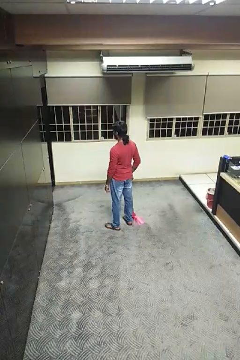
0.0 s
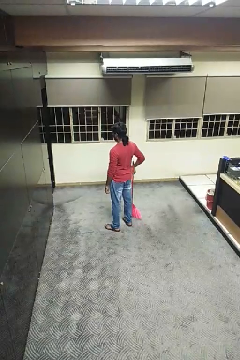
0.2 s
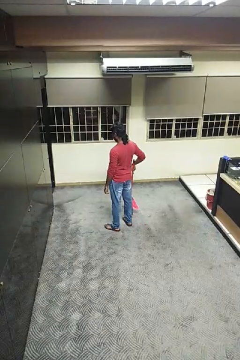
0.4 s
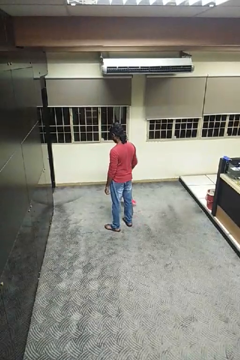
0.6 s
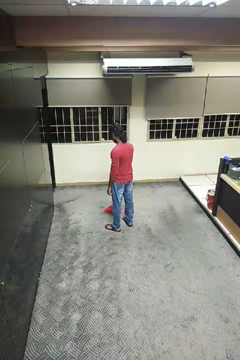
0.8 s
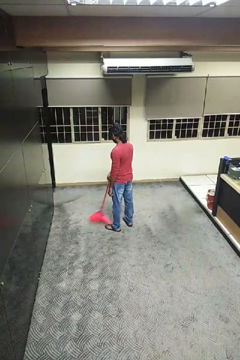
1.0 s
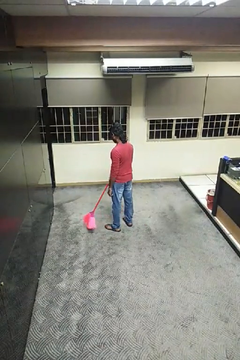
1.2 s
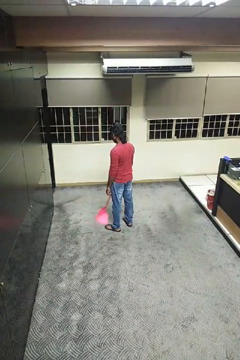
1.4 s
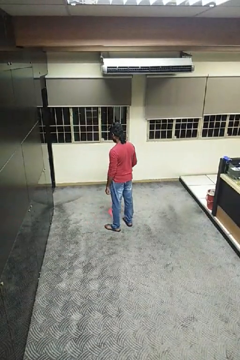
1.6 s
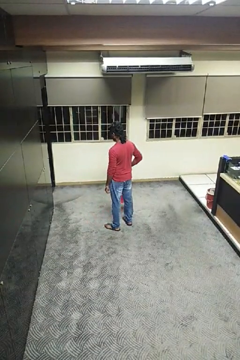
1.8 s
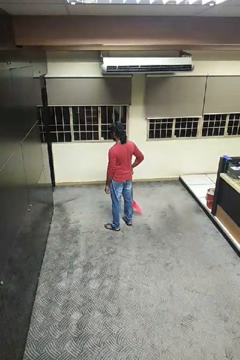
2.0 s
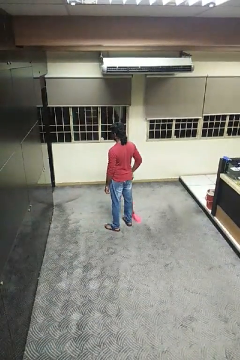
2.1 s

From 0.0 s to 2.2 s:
person sweeps floor

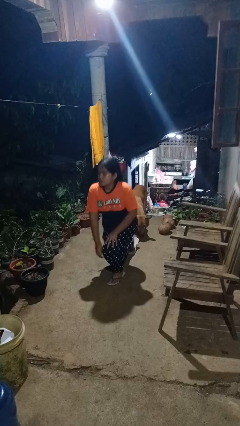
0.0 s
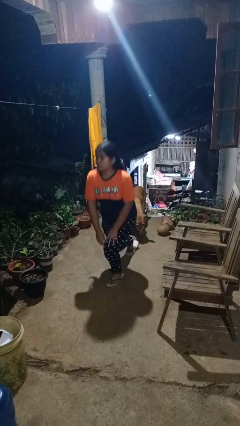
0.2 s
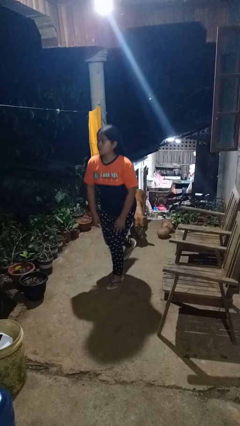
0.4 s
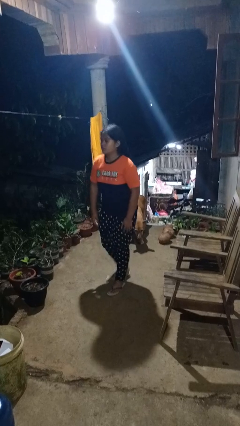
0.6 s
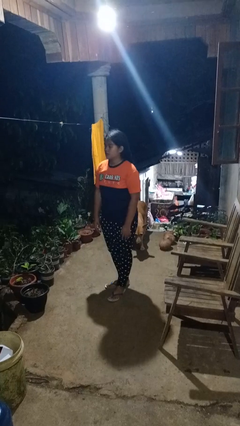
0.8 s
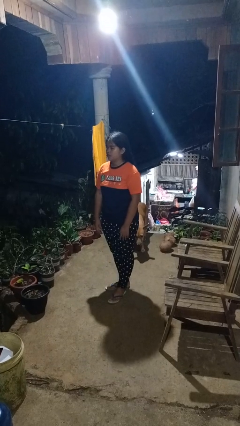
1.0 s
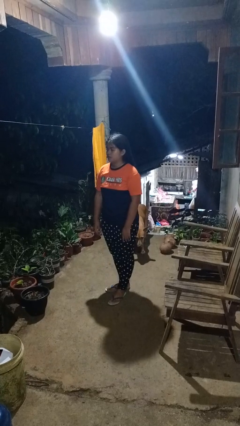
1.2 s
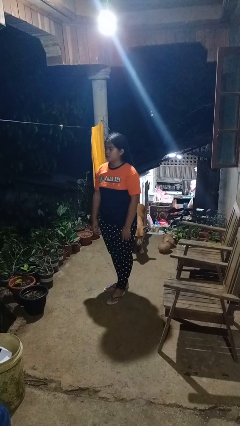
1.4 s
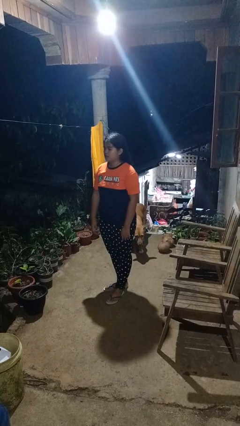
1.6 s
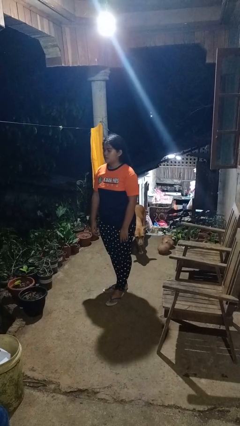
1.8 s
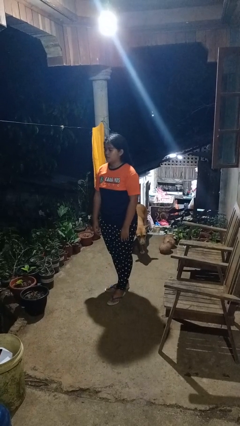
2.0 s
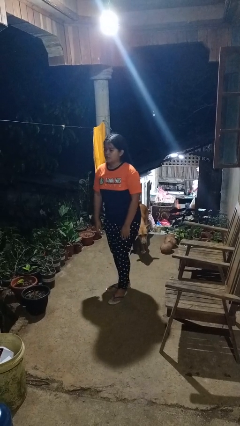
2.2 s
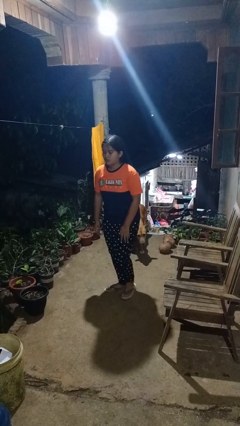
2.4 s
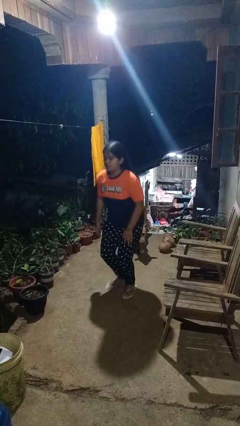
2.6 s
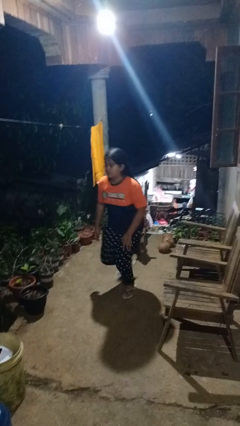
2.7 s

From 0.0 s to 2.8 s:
person stands up from floor

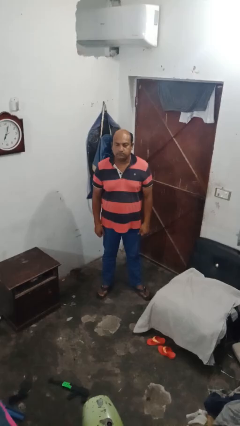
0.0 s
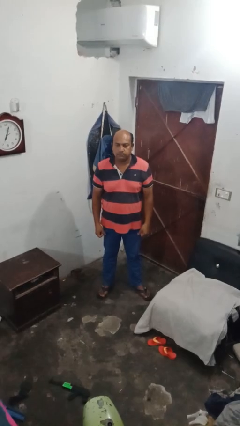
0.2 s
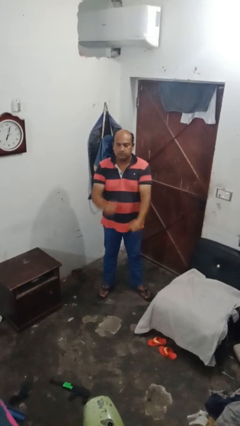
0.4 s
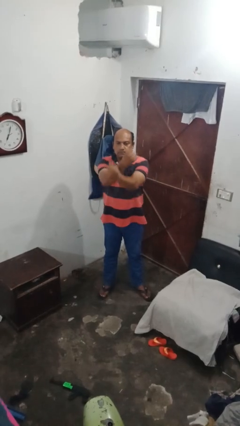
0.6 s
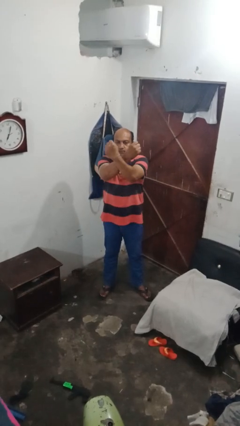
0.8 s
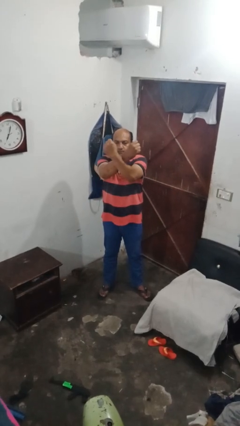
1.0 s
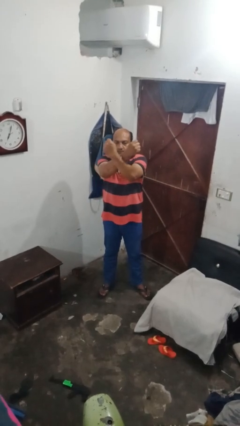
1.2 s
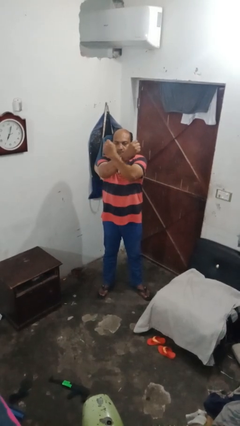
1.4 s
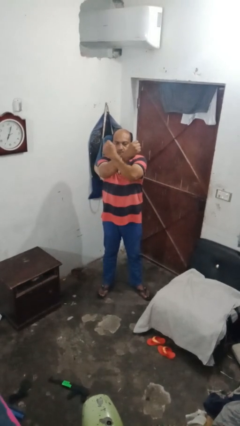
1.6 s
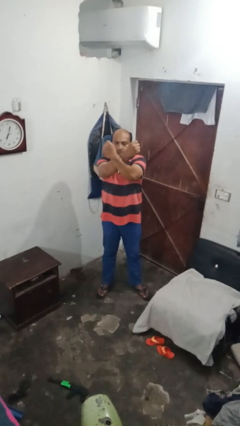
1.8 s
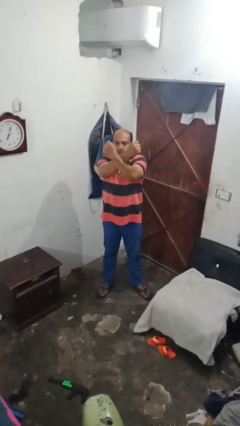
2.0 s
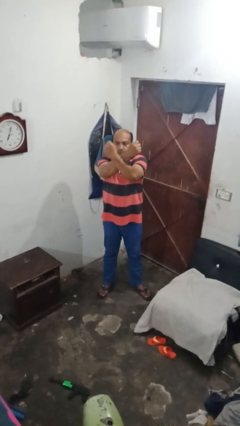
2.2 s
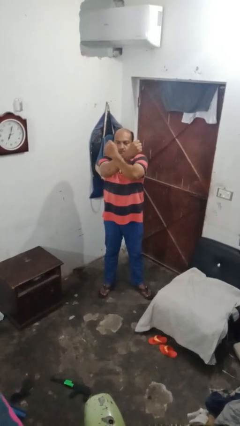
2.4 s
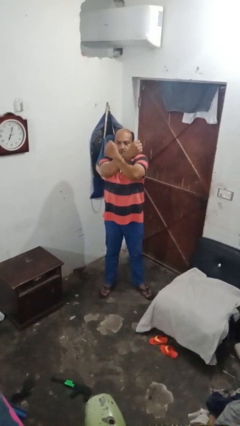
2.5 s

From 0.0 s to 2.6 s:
person gestures arms x

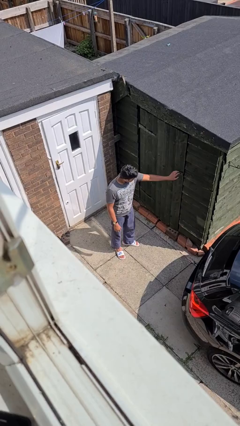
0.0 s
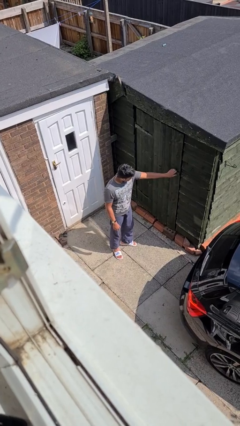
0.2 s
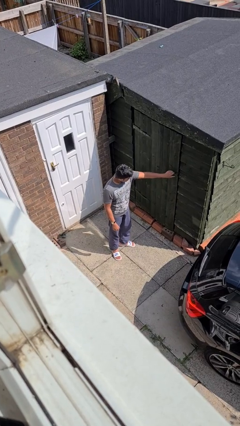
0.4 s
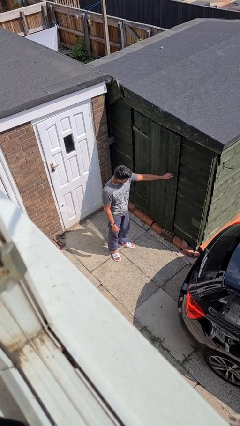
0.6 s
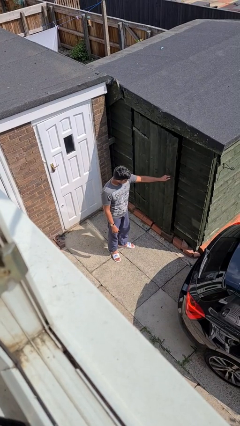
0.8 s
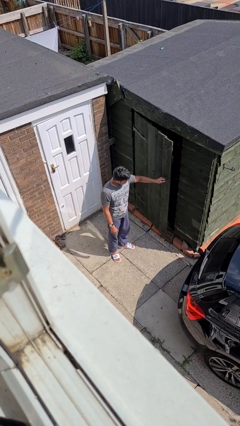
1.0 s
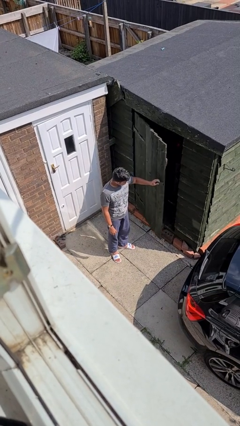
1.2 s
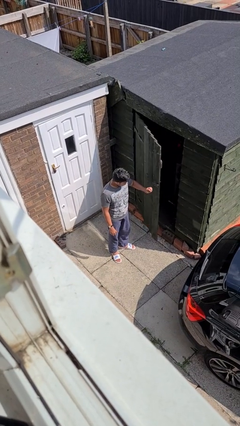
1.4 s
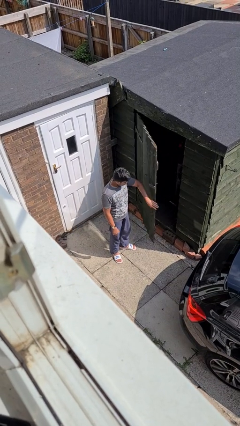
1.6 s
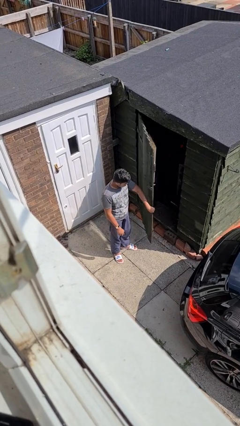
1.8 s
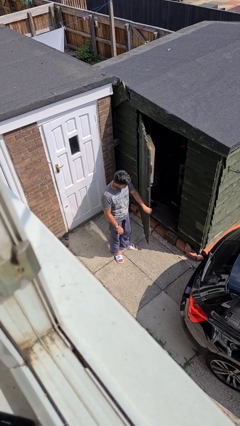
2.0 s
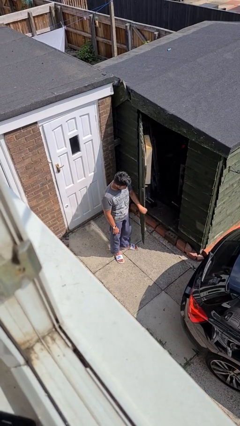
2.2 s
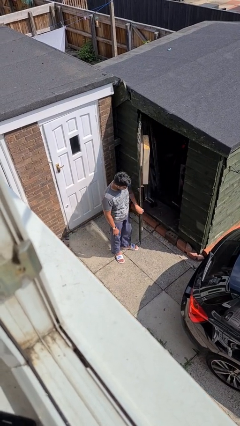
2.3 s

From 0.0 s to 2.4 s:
person opens facility door

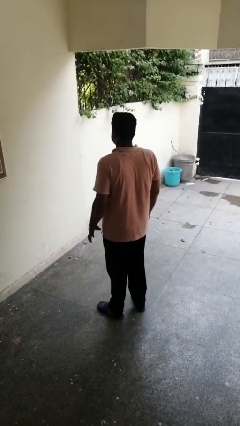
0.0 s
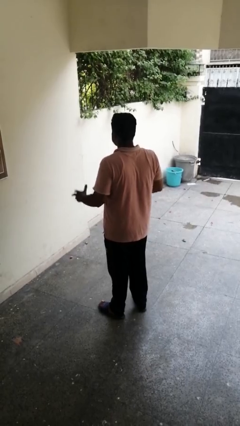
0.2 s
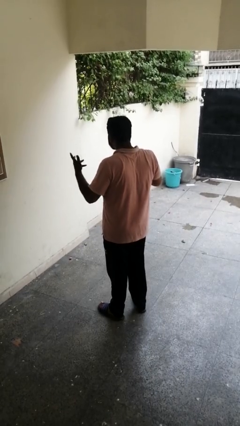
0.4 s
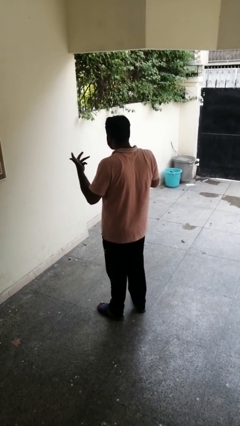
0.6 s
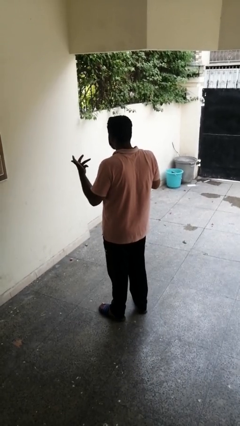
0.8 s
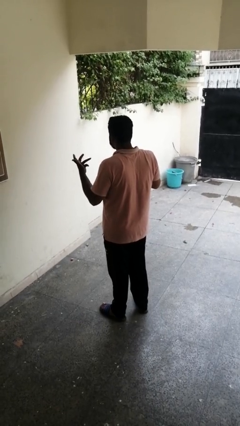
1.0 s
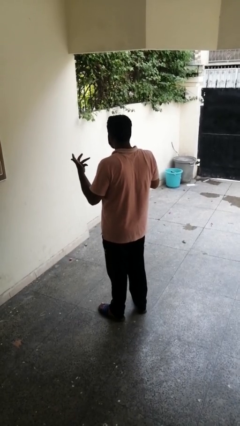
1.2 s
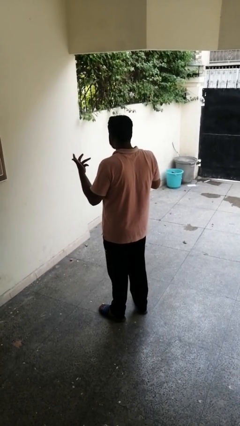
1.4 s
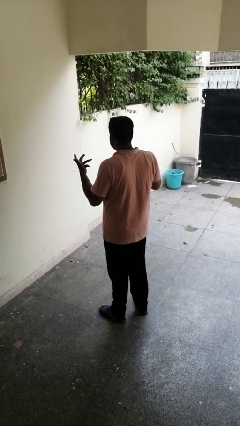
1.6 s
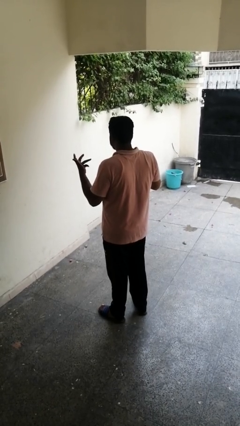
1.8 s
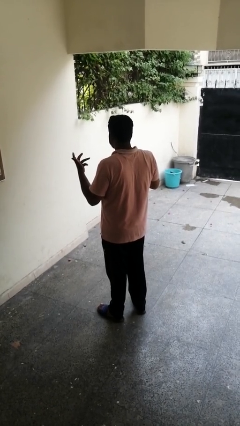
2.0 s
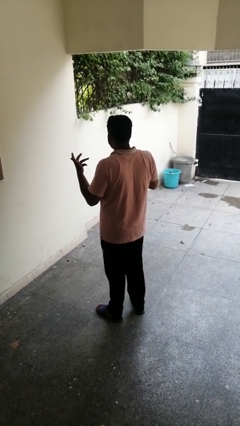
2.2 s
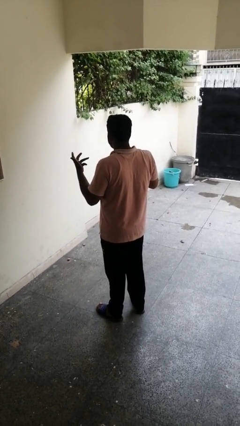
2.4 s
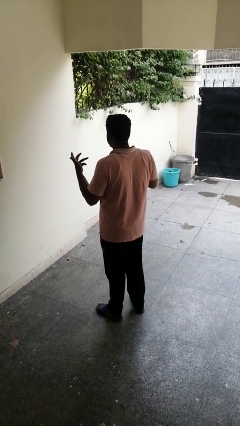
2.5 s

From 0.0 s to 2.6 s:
person shrugs

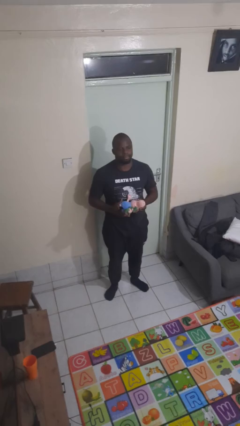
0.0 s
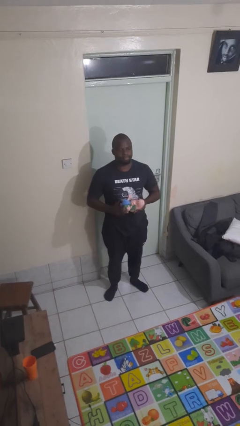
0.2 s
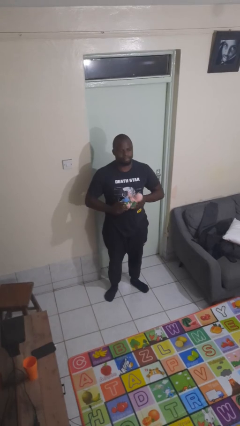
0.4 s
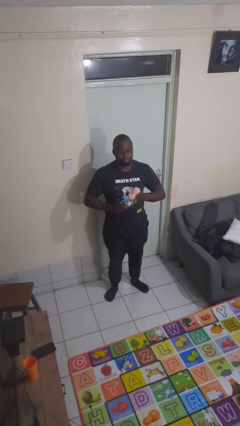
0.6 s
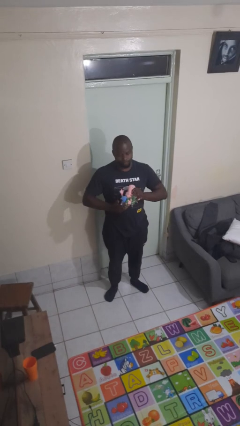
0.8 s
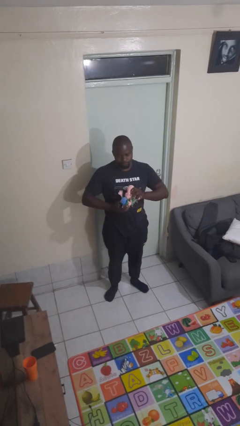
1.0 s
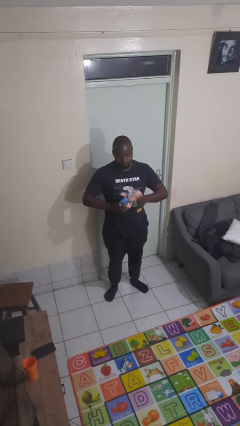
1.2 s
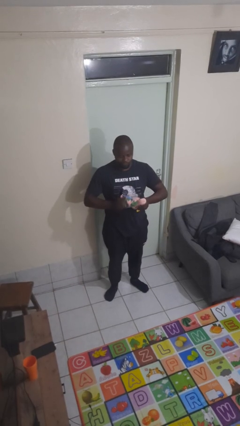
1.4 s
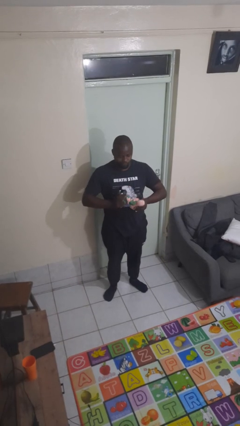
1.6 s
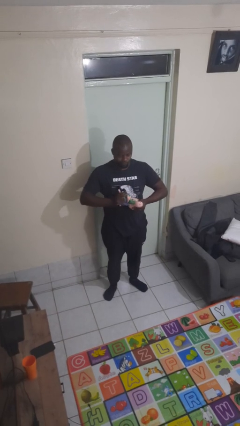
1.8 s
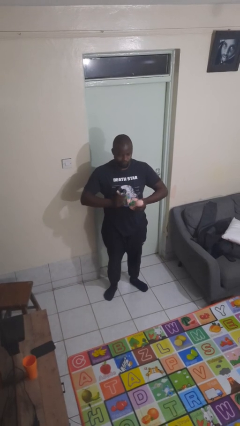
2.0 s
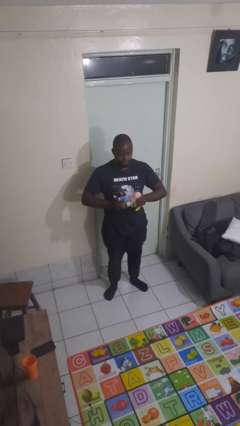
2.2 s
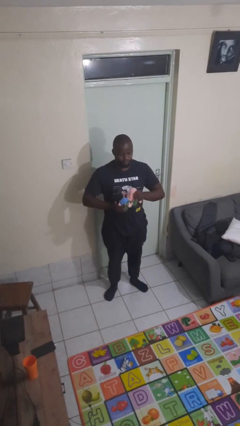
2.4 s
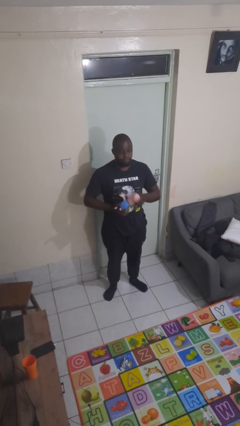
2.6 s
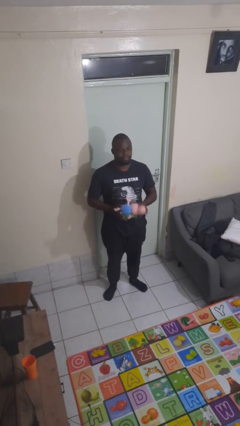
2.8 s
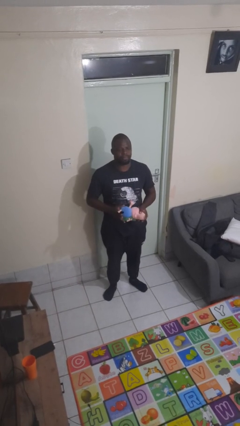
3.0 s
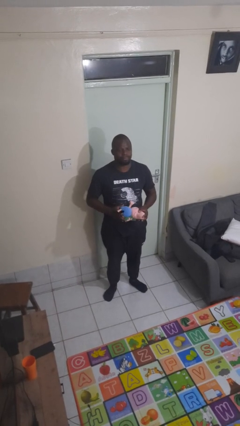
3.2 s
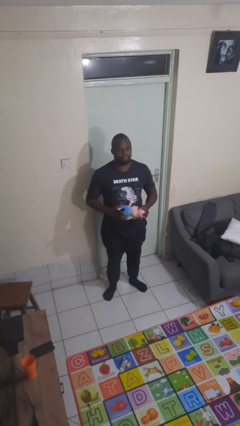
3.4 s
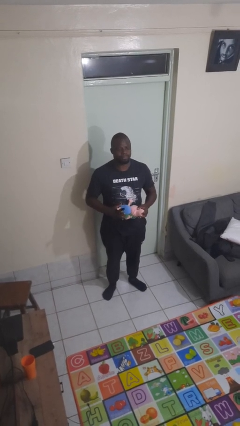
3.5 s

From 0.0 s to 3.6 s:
person squeezes object

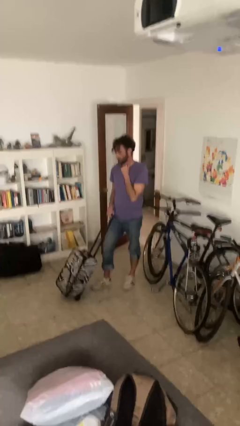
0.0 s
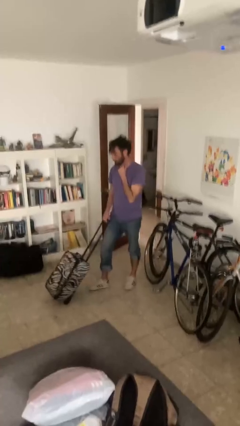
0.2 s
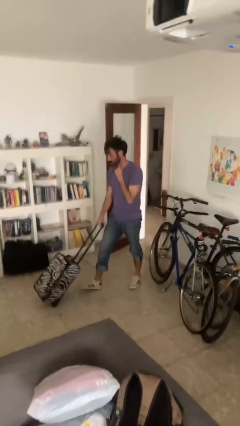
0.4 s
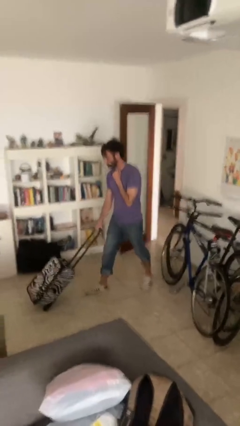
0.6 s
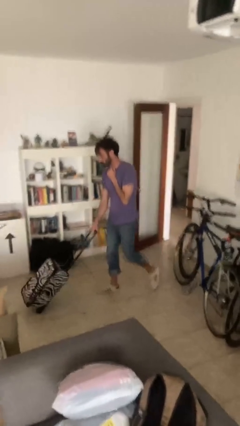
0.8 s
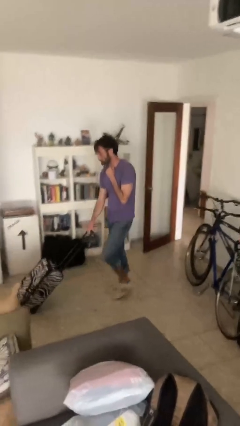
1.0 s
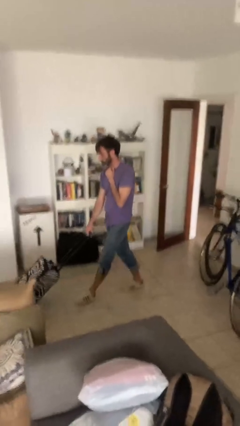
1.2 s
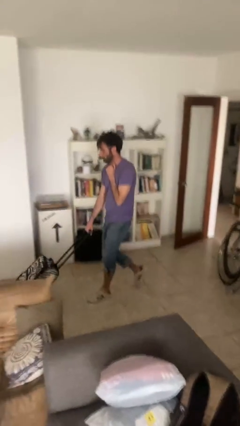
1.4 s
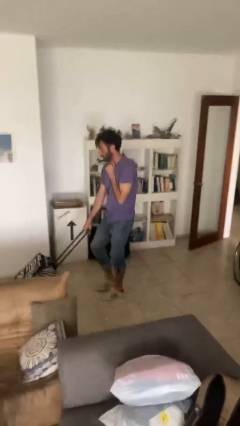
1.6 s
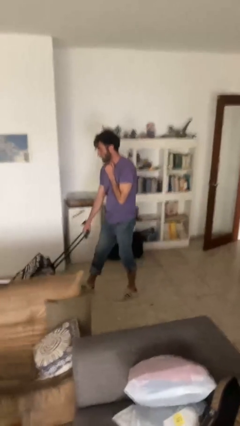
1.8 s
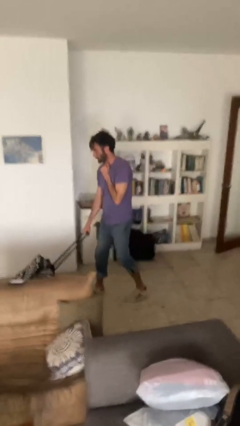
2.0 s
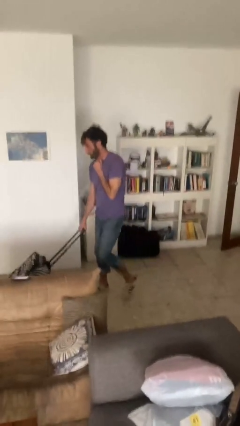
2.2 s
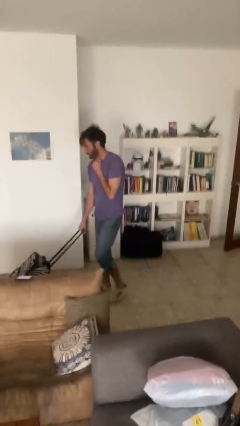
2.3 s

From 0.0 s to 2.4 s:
person pushes wheeled cart
